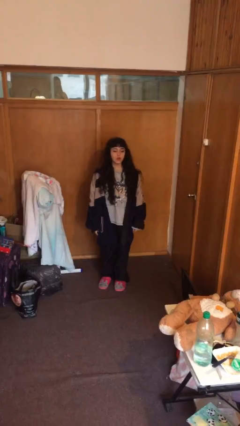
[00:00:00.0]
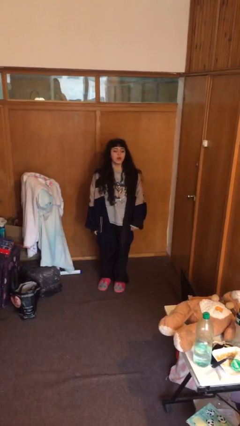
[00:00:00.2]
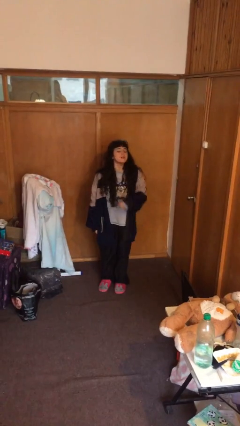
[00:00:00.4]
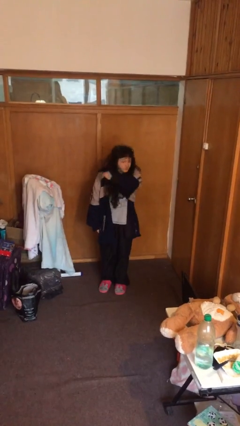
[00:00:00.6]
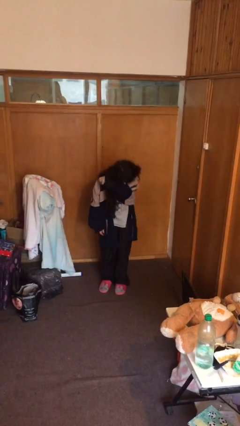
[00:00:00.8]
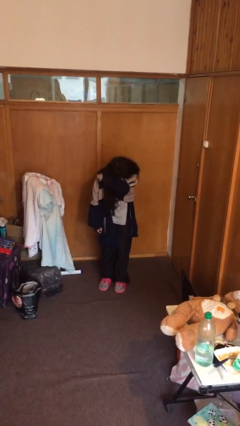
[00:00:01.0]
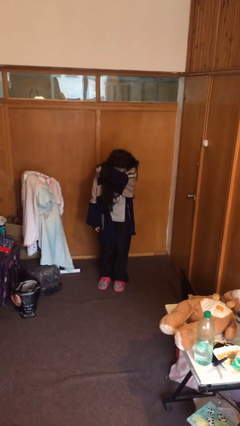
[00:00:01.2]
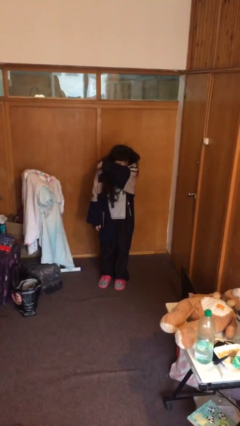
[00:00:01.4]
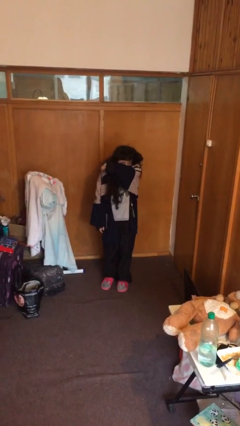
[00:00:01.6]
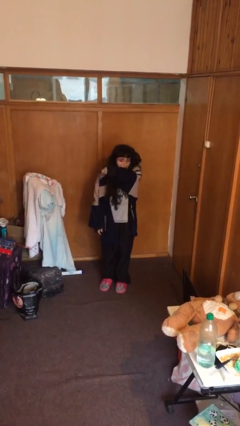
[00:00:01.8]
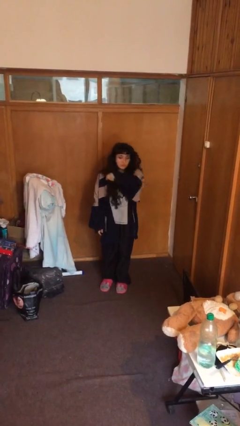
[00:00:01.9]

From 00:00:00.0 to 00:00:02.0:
person sneezes into arm

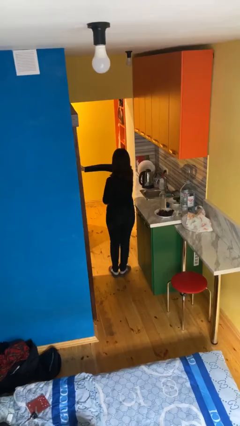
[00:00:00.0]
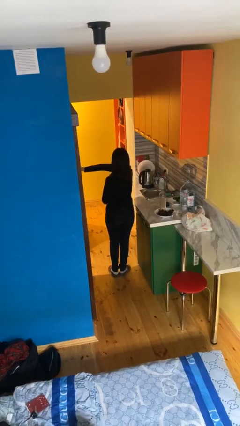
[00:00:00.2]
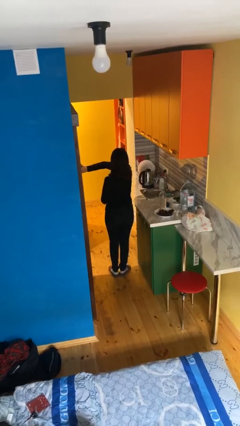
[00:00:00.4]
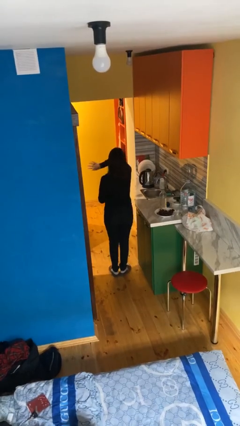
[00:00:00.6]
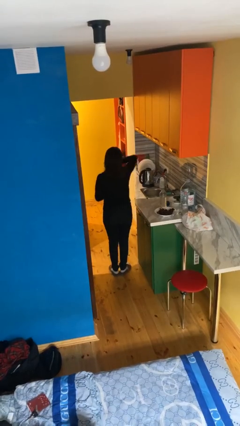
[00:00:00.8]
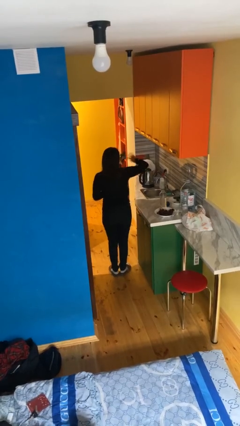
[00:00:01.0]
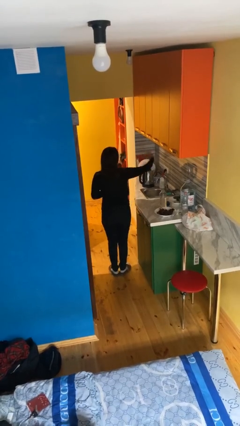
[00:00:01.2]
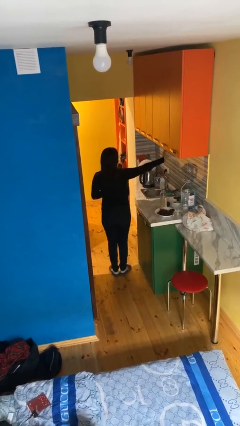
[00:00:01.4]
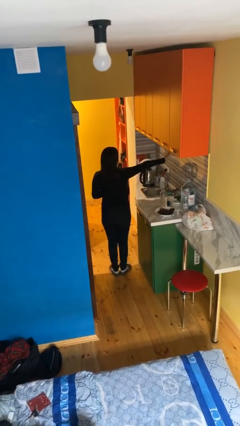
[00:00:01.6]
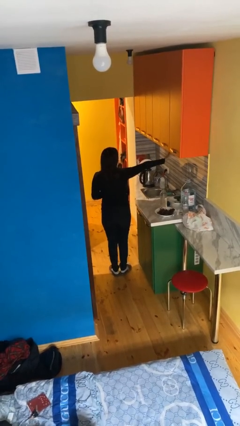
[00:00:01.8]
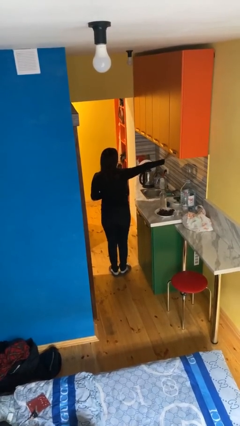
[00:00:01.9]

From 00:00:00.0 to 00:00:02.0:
person gestures swipe right

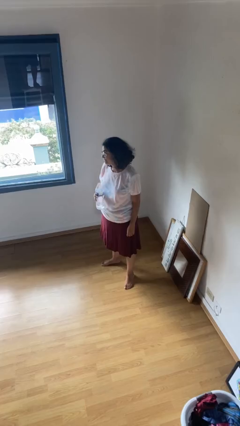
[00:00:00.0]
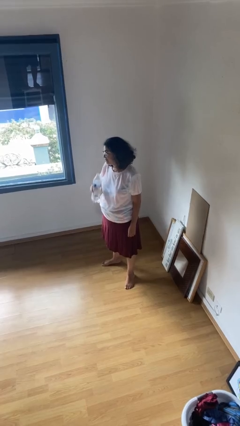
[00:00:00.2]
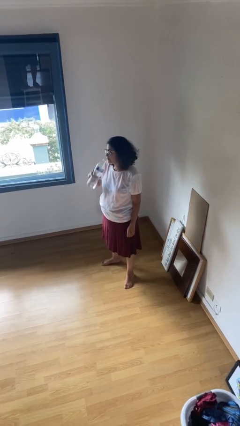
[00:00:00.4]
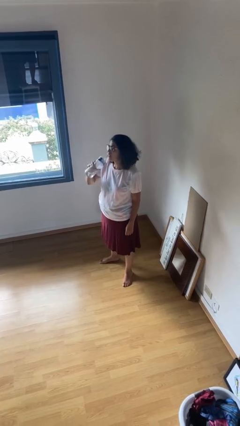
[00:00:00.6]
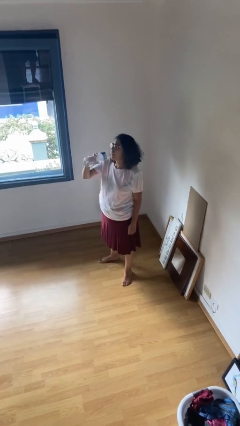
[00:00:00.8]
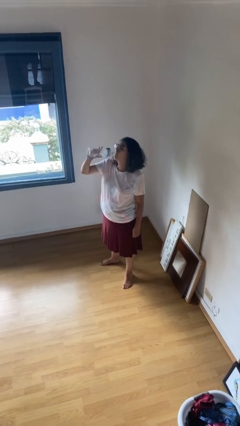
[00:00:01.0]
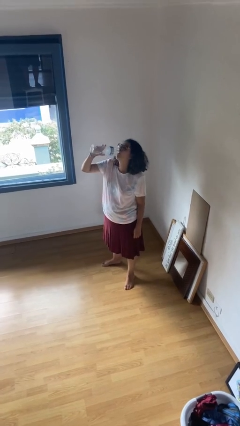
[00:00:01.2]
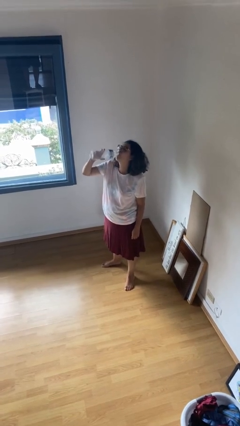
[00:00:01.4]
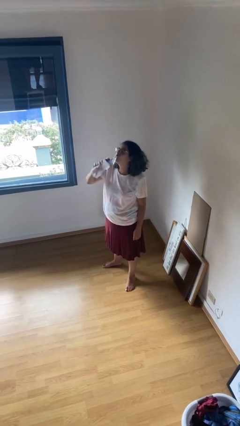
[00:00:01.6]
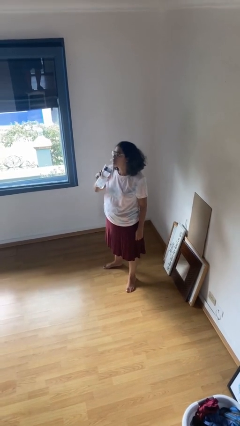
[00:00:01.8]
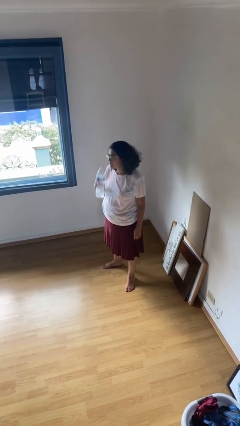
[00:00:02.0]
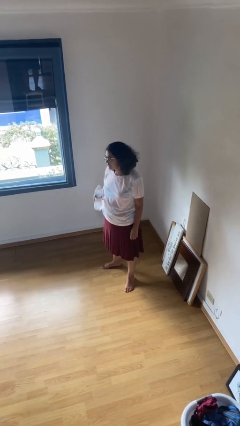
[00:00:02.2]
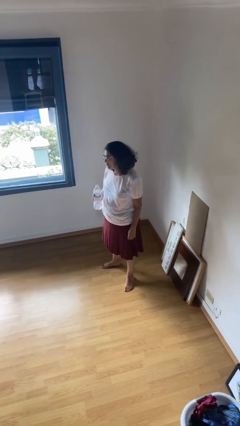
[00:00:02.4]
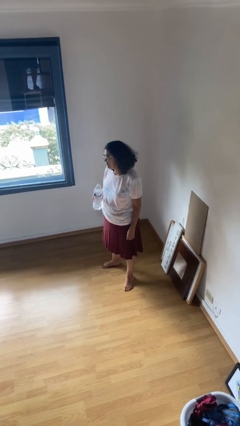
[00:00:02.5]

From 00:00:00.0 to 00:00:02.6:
person drinks from bottle

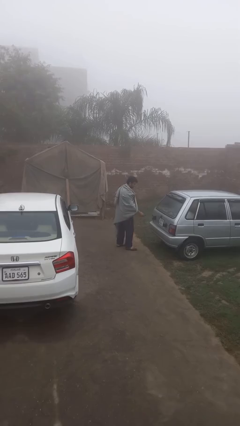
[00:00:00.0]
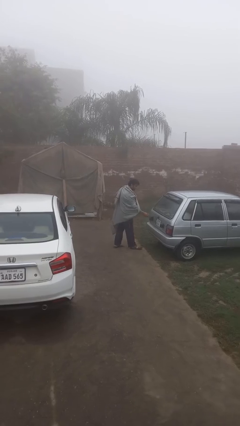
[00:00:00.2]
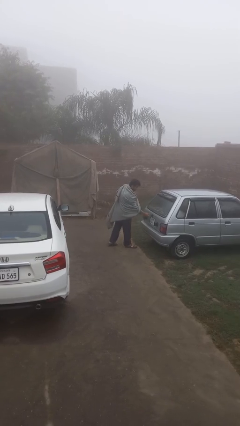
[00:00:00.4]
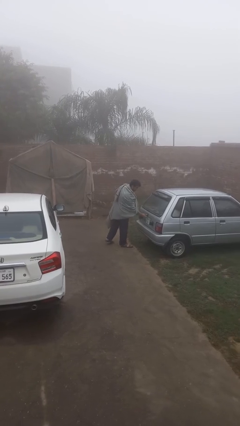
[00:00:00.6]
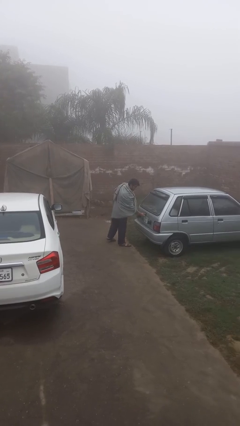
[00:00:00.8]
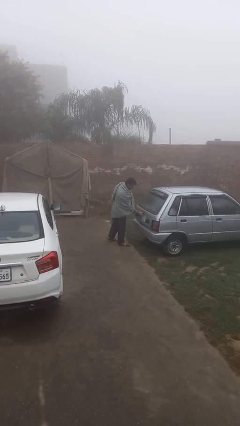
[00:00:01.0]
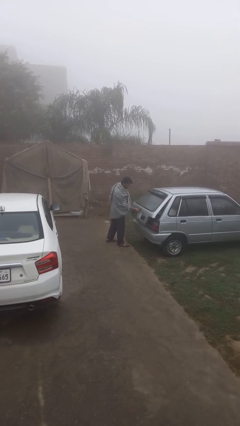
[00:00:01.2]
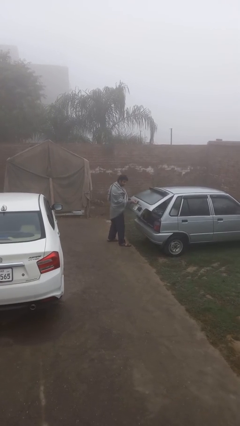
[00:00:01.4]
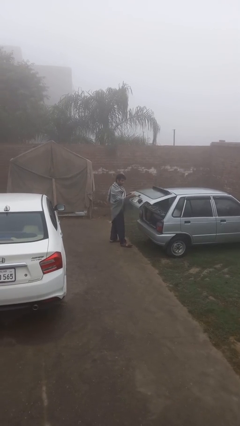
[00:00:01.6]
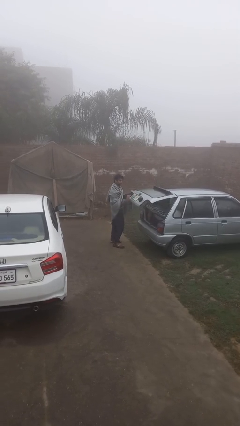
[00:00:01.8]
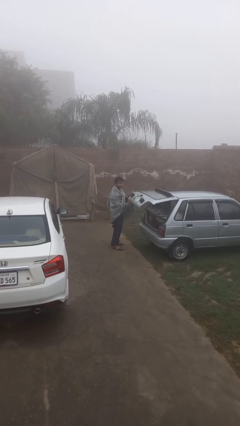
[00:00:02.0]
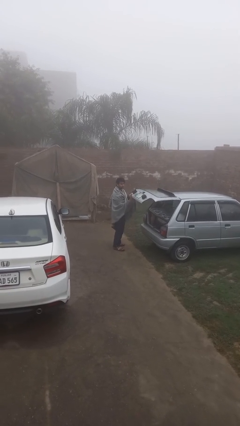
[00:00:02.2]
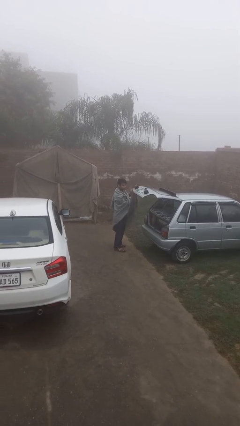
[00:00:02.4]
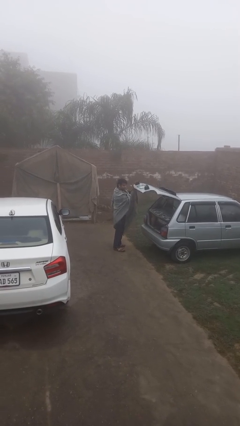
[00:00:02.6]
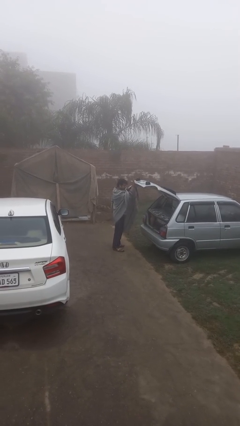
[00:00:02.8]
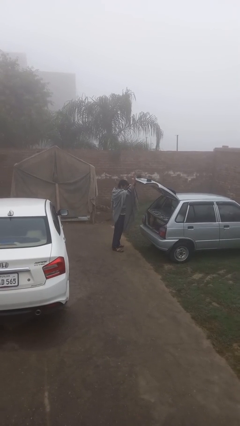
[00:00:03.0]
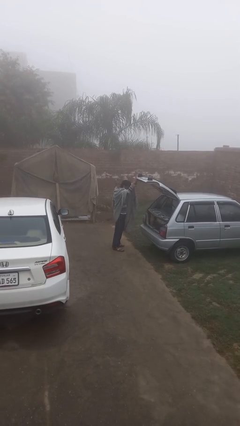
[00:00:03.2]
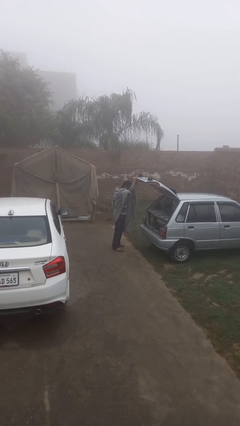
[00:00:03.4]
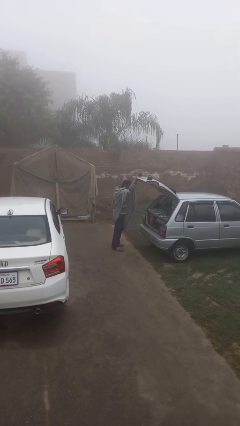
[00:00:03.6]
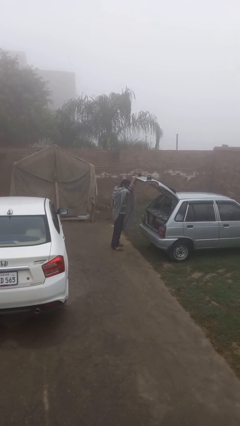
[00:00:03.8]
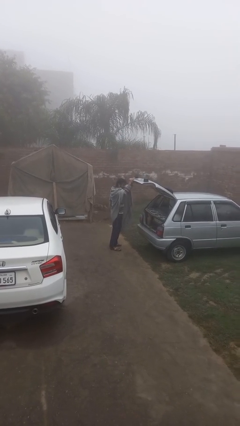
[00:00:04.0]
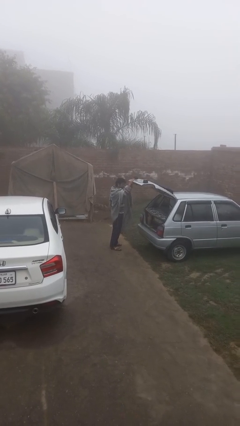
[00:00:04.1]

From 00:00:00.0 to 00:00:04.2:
person opens car trunk

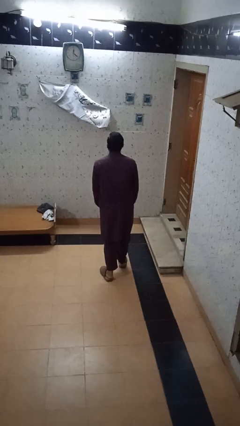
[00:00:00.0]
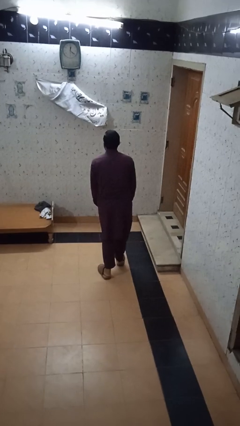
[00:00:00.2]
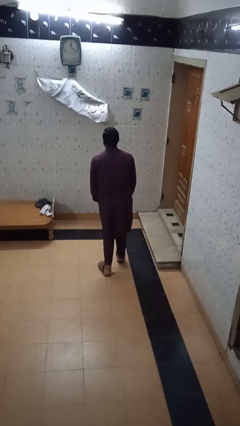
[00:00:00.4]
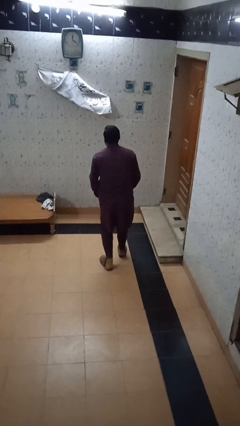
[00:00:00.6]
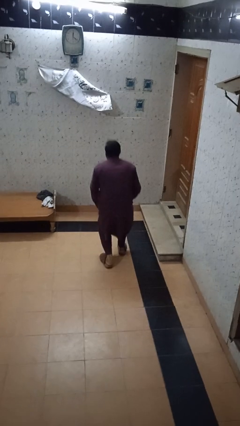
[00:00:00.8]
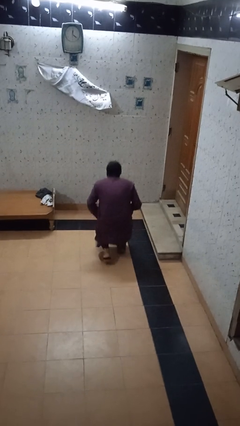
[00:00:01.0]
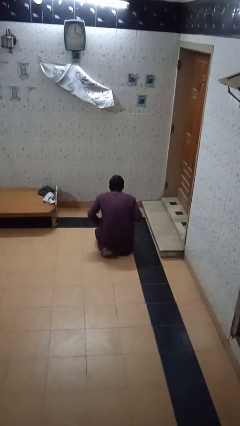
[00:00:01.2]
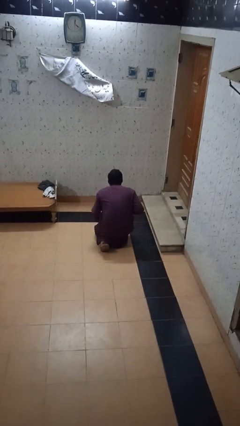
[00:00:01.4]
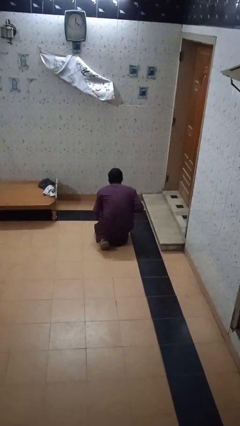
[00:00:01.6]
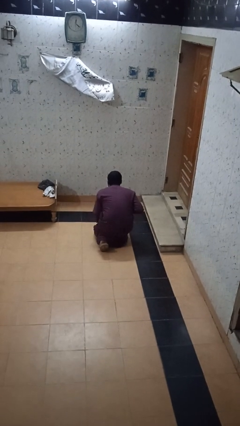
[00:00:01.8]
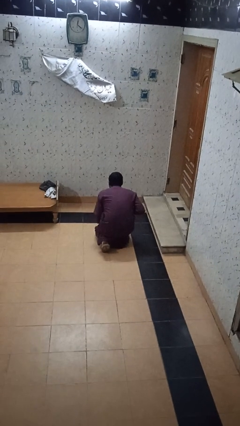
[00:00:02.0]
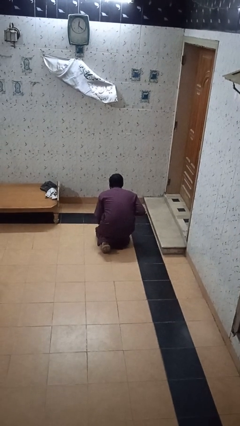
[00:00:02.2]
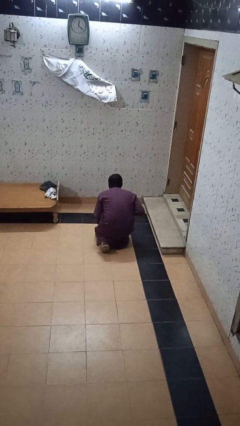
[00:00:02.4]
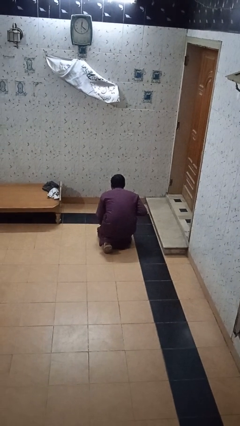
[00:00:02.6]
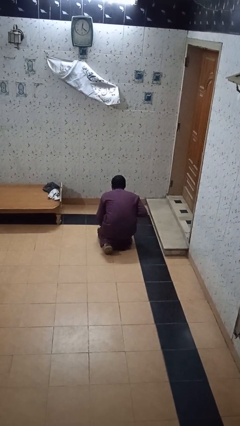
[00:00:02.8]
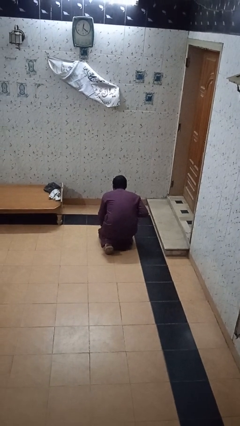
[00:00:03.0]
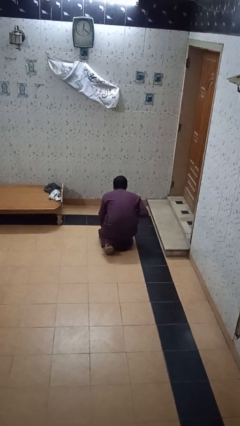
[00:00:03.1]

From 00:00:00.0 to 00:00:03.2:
person kneels

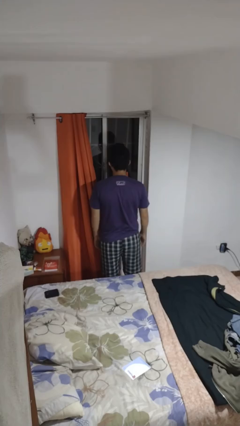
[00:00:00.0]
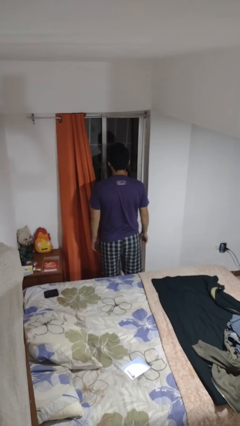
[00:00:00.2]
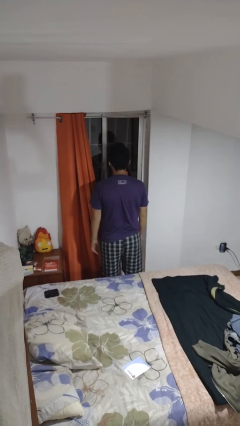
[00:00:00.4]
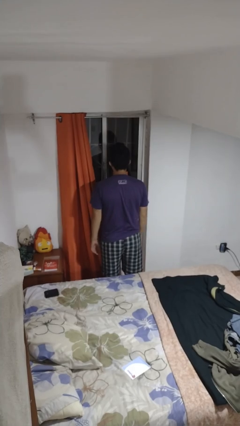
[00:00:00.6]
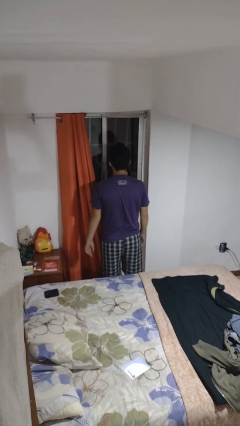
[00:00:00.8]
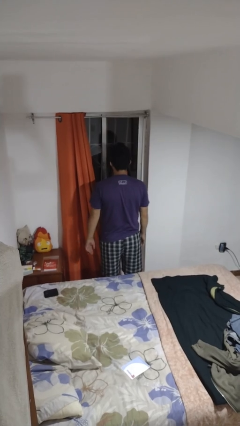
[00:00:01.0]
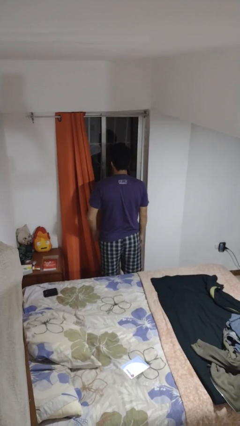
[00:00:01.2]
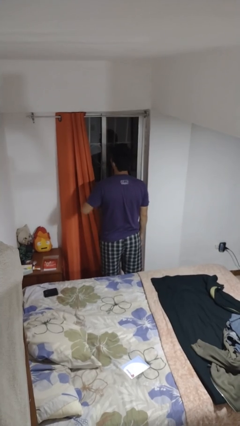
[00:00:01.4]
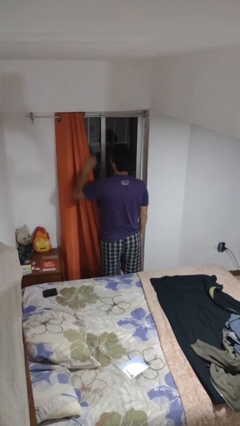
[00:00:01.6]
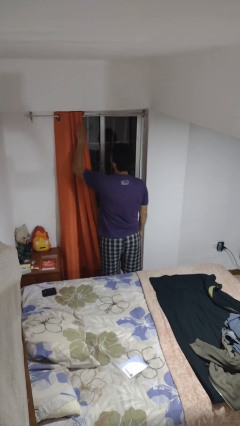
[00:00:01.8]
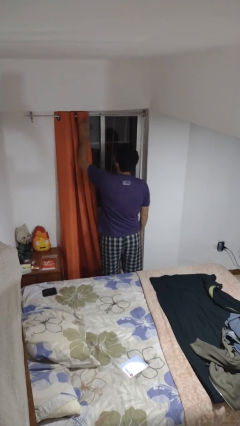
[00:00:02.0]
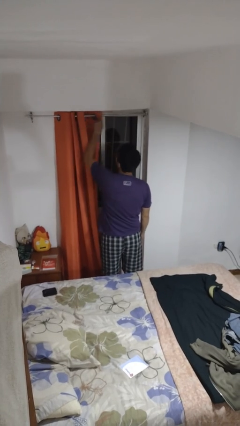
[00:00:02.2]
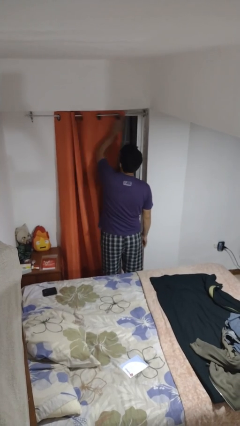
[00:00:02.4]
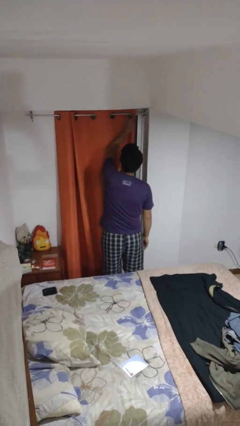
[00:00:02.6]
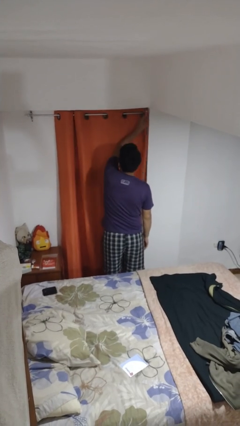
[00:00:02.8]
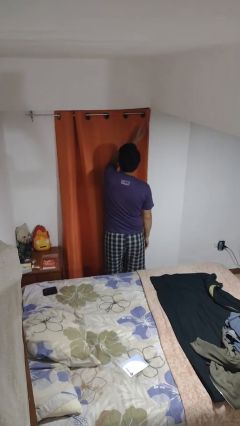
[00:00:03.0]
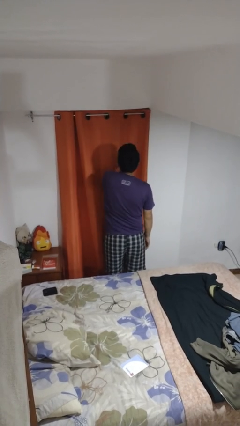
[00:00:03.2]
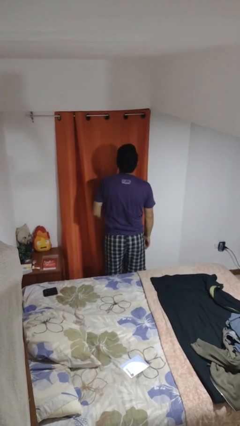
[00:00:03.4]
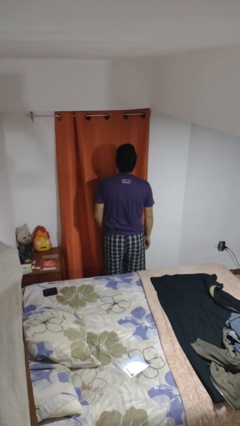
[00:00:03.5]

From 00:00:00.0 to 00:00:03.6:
person closes curtains
